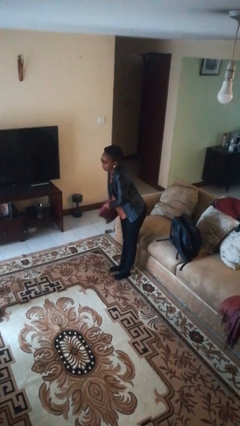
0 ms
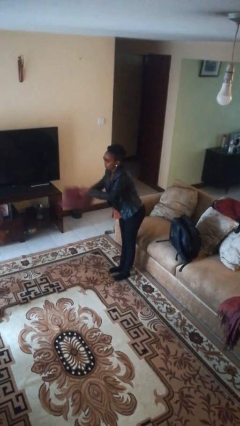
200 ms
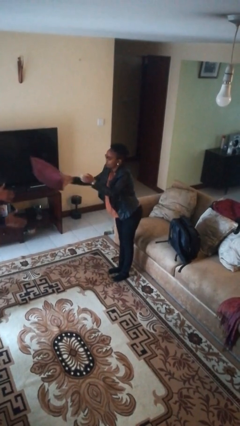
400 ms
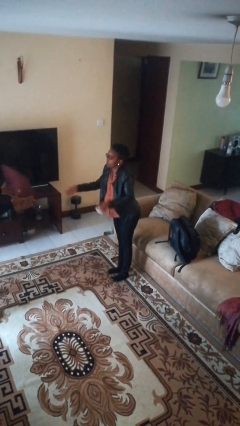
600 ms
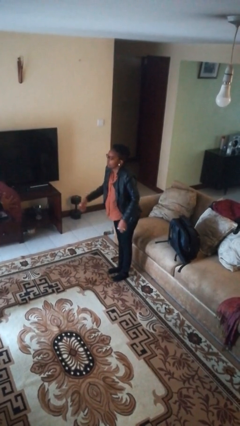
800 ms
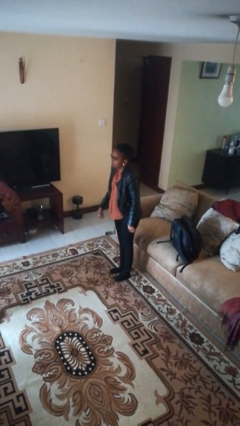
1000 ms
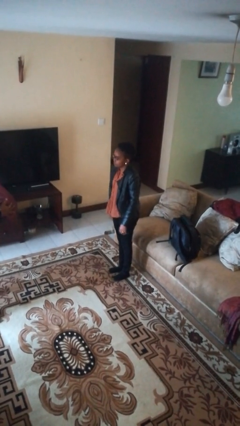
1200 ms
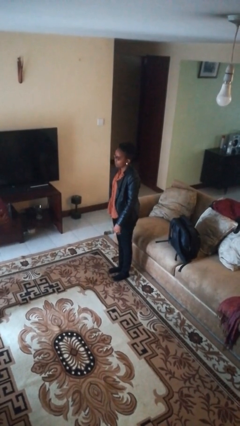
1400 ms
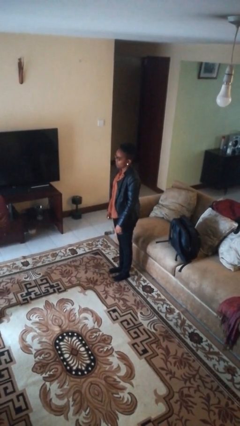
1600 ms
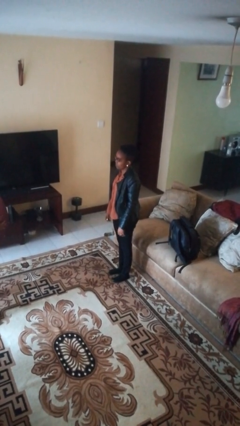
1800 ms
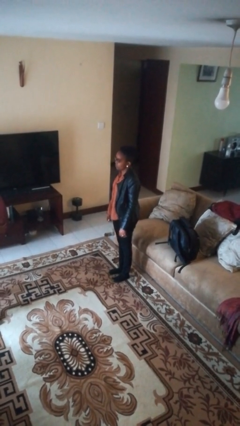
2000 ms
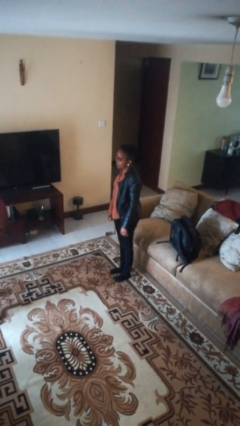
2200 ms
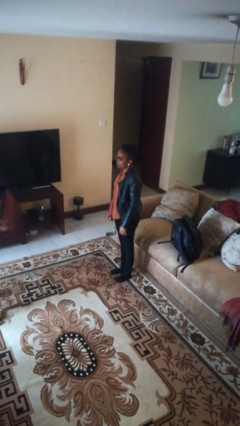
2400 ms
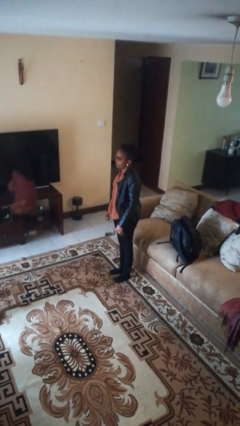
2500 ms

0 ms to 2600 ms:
person throws object to person

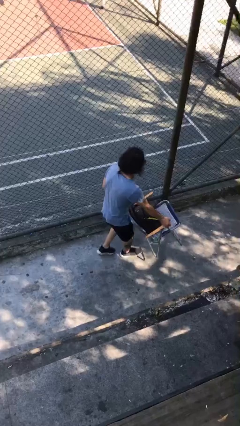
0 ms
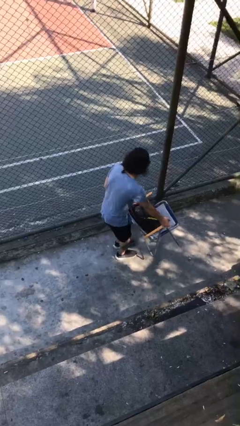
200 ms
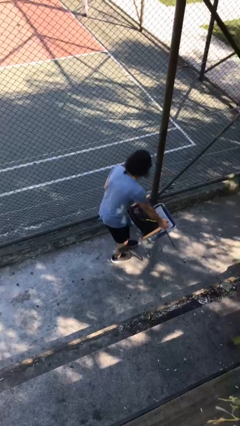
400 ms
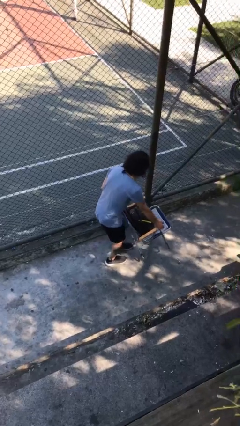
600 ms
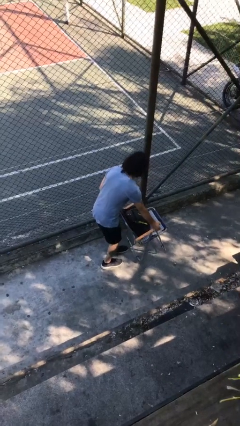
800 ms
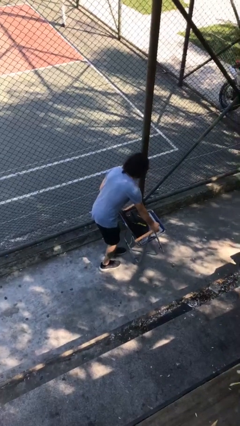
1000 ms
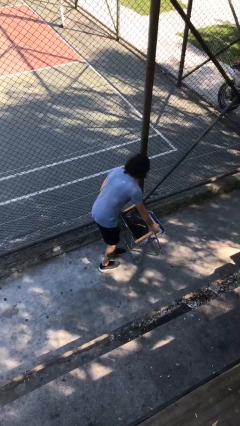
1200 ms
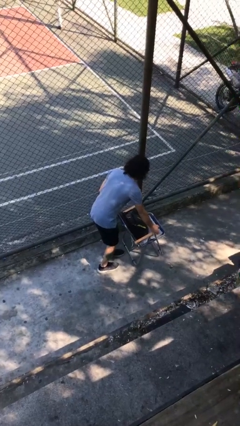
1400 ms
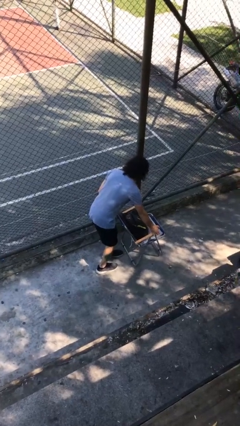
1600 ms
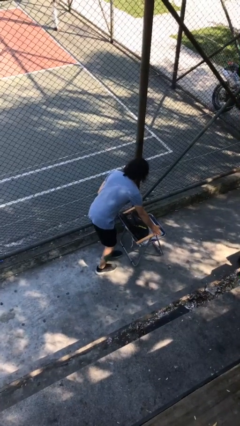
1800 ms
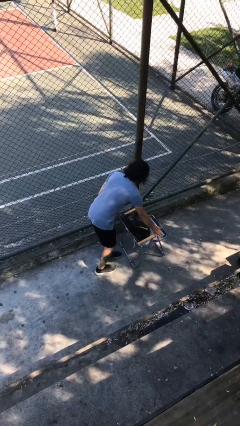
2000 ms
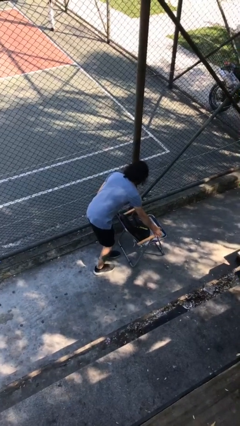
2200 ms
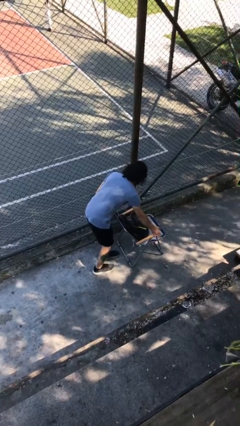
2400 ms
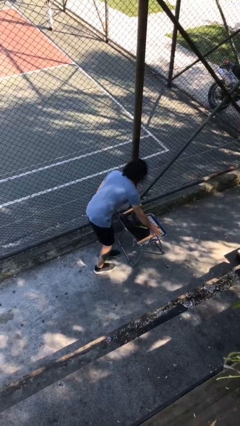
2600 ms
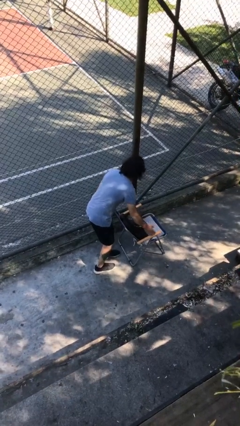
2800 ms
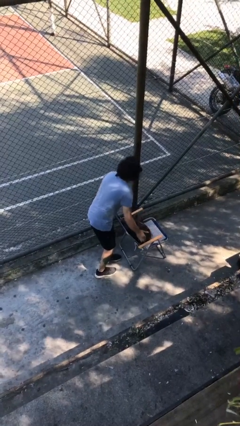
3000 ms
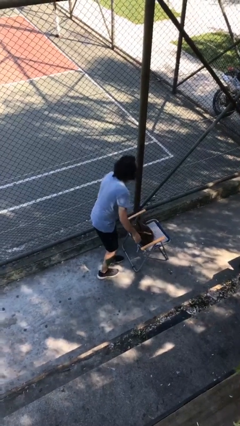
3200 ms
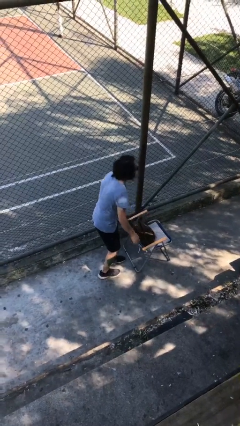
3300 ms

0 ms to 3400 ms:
person puts down object on floor

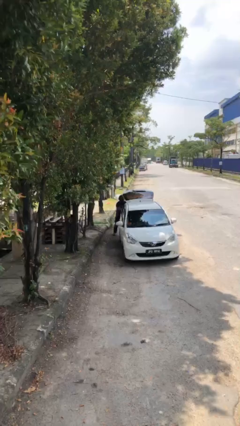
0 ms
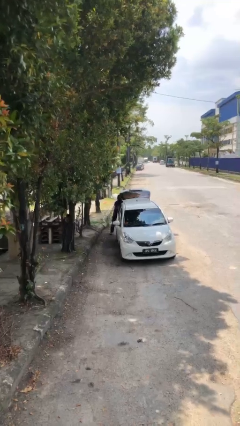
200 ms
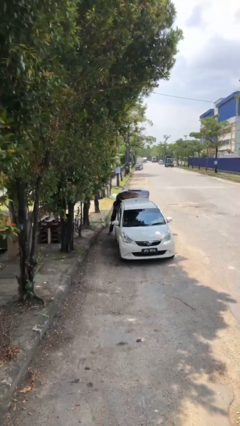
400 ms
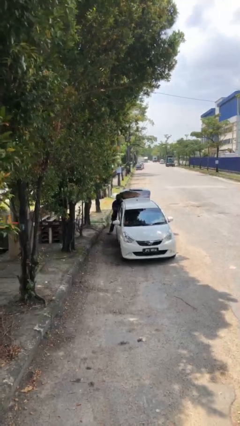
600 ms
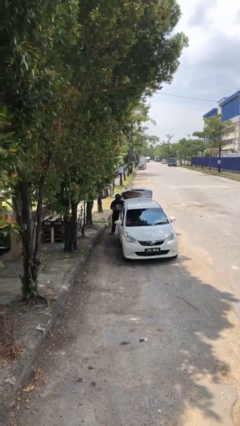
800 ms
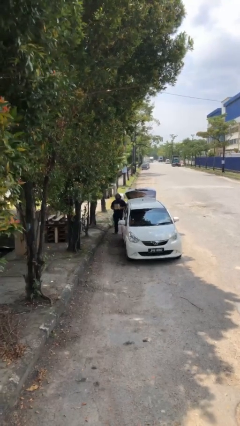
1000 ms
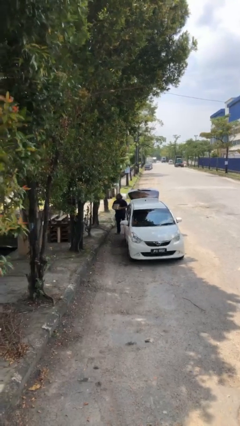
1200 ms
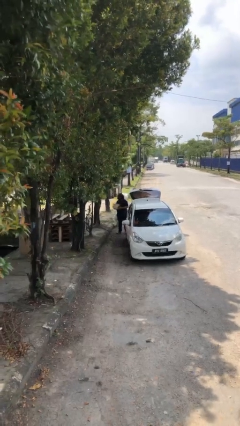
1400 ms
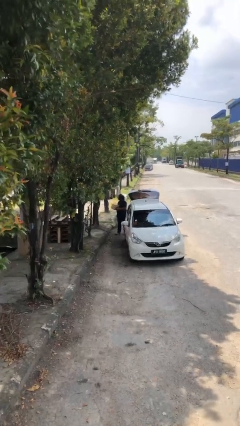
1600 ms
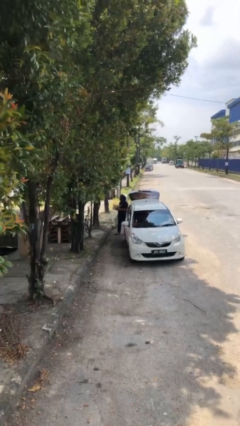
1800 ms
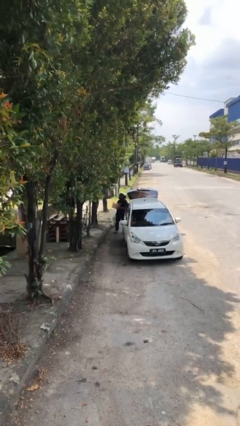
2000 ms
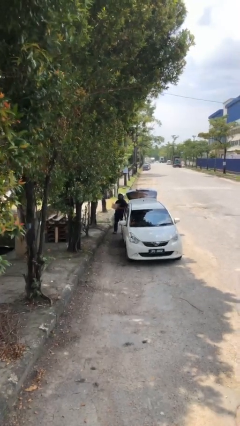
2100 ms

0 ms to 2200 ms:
person unloads car

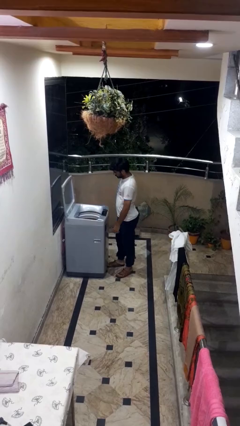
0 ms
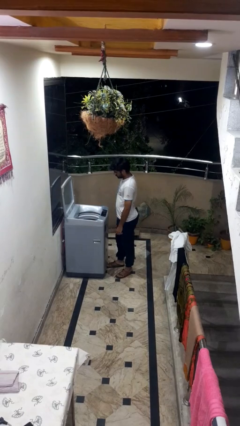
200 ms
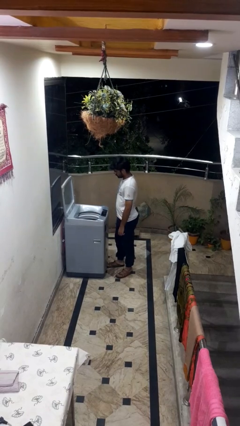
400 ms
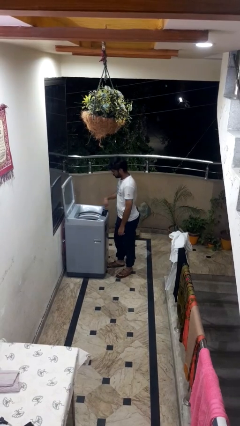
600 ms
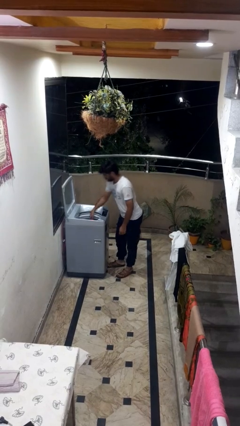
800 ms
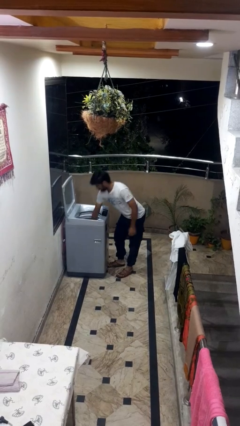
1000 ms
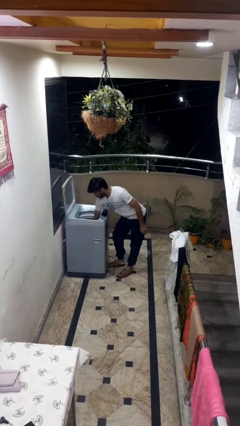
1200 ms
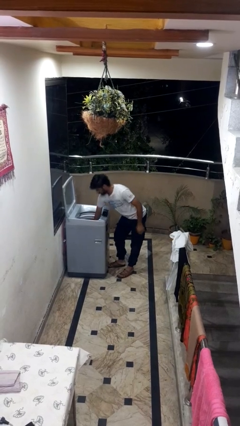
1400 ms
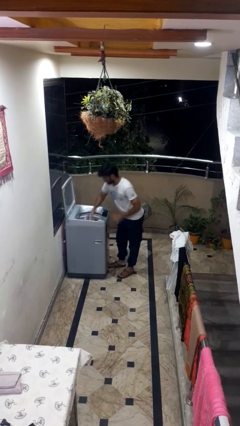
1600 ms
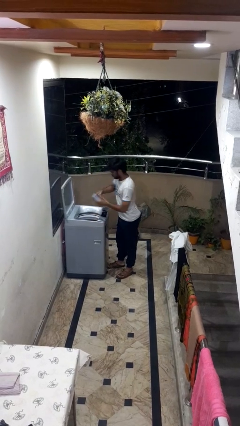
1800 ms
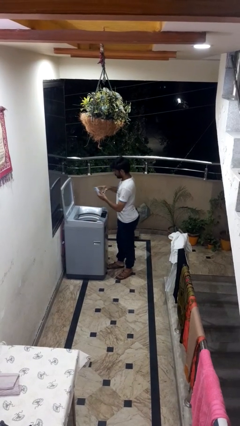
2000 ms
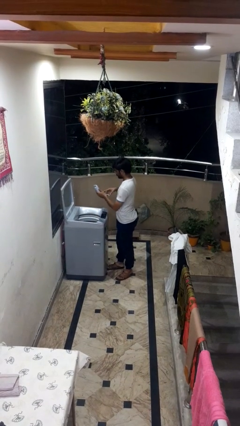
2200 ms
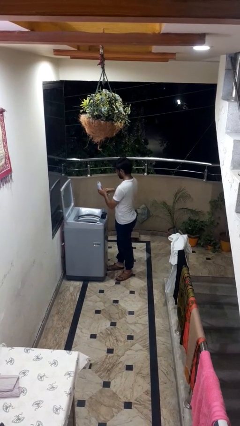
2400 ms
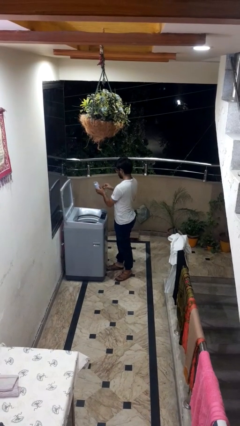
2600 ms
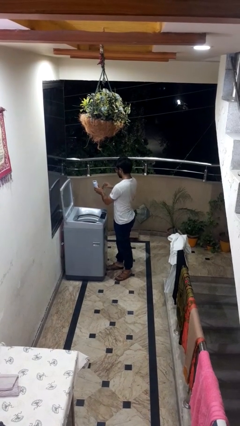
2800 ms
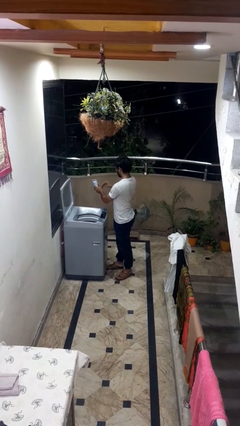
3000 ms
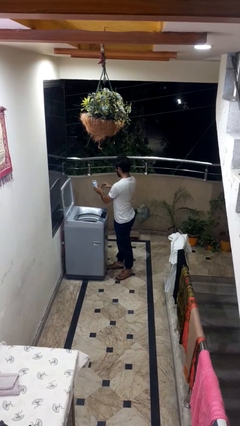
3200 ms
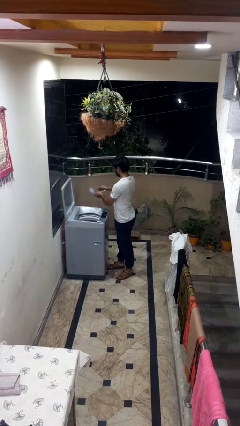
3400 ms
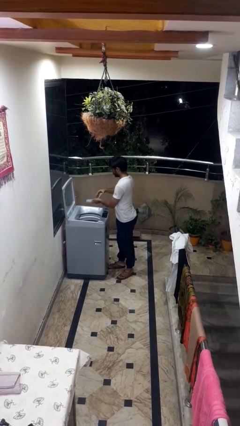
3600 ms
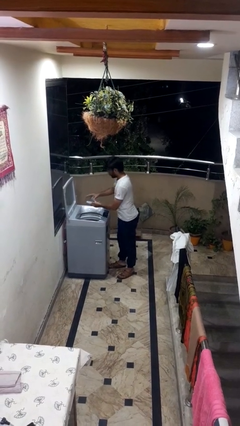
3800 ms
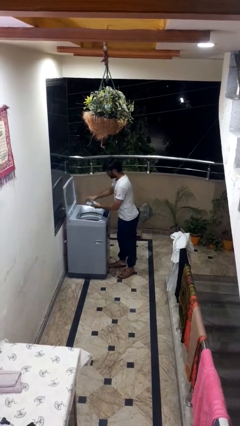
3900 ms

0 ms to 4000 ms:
person cleans dryer lint trap

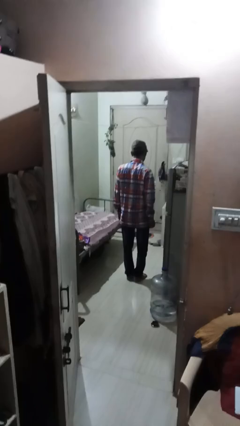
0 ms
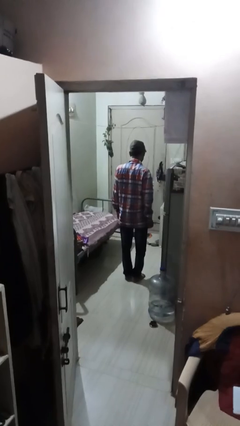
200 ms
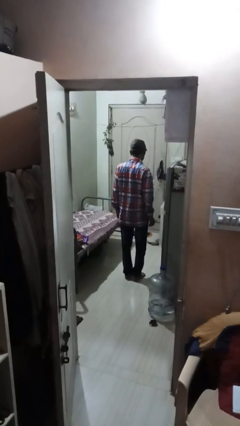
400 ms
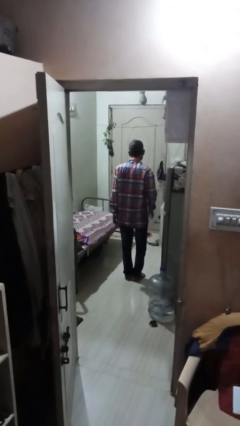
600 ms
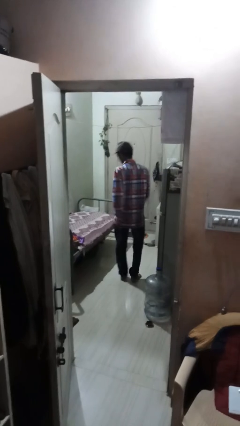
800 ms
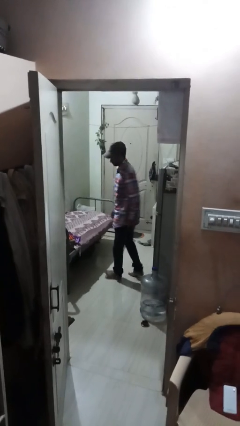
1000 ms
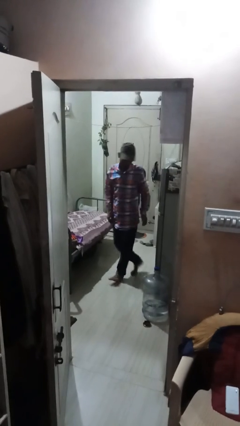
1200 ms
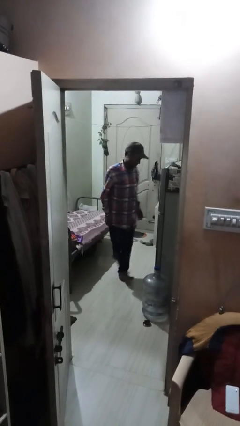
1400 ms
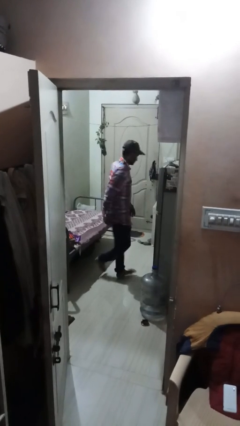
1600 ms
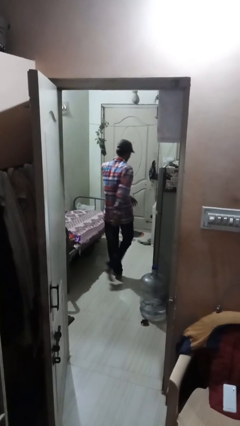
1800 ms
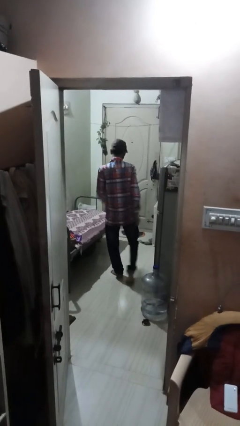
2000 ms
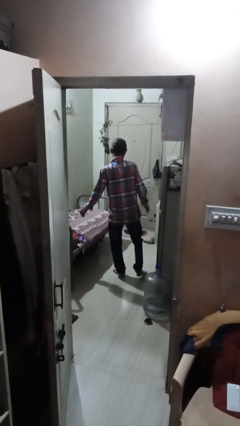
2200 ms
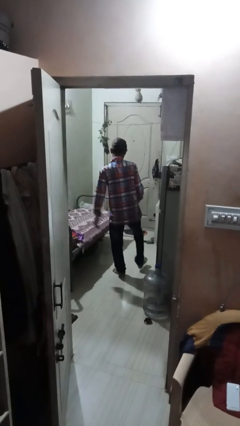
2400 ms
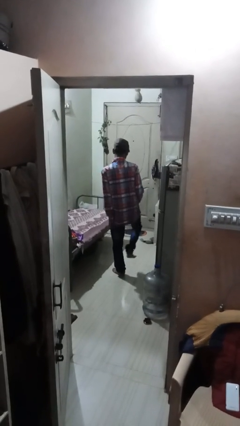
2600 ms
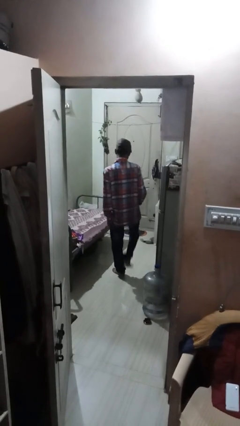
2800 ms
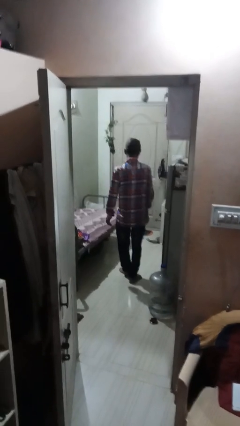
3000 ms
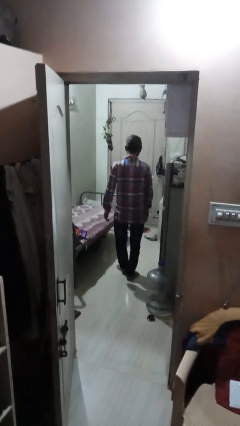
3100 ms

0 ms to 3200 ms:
person twirls

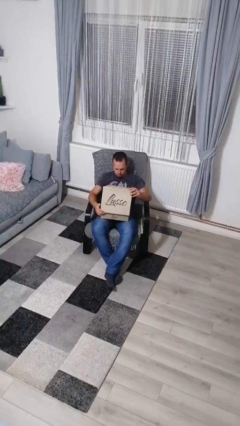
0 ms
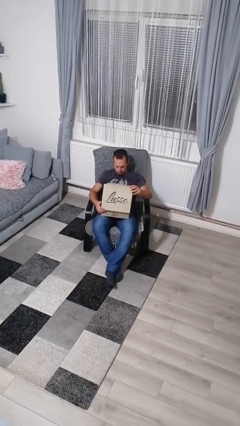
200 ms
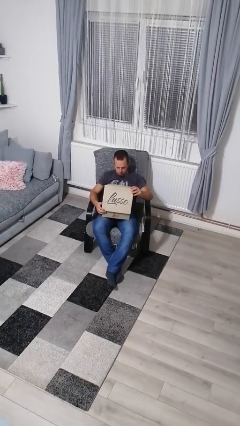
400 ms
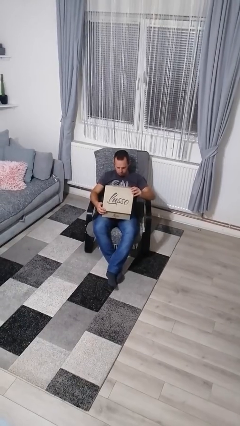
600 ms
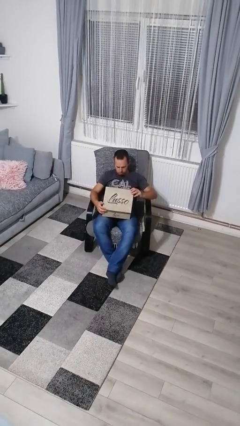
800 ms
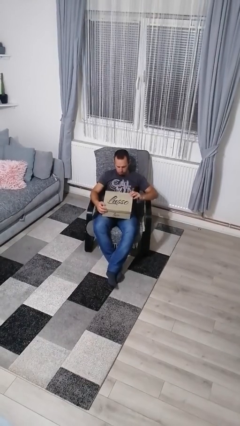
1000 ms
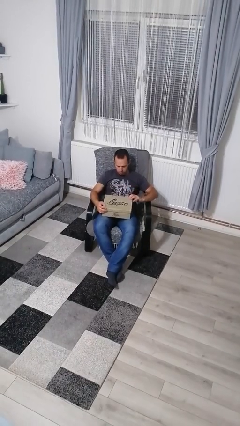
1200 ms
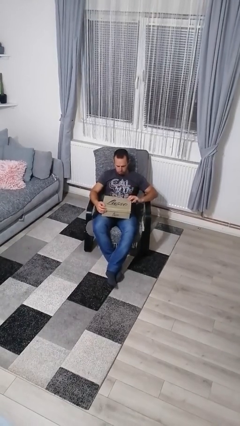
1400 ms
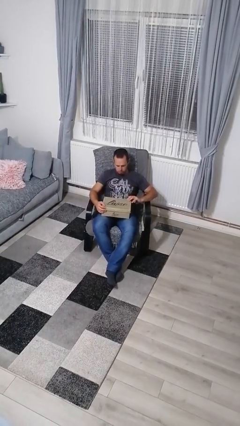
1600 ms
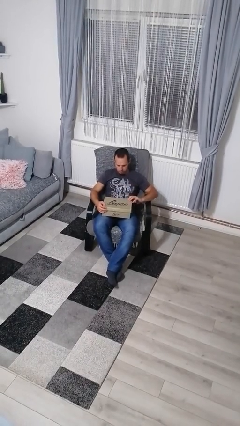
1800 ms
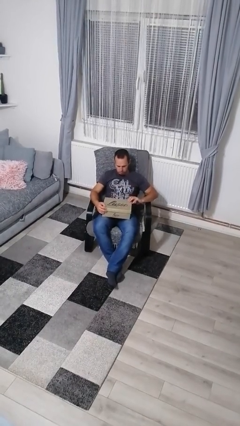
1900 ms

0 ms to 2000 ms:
person closes box

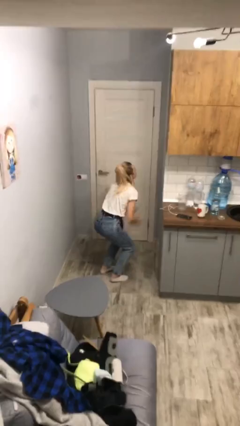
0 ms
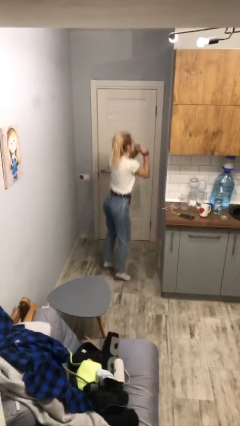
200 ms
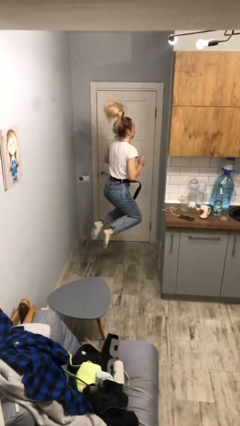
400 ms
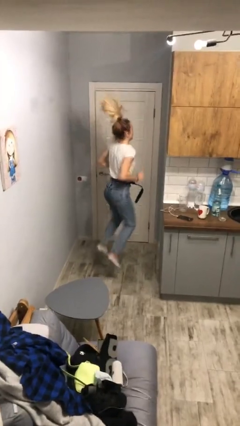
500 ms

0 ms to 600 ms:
person jumps
